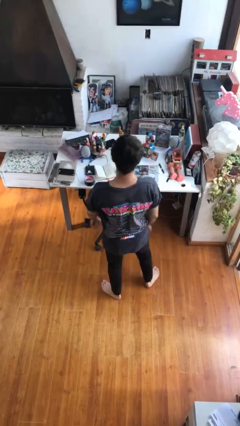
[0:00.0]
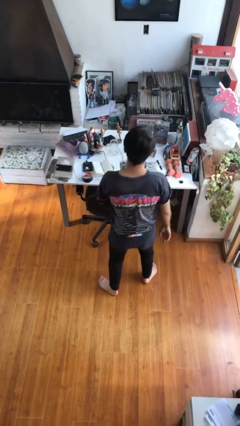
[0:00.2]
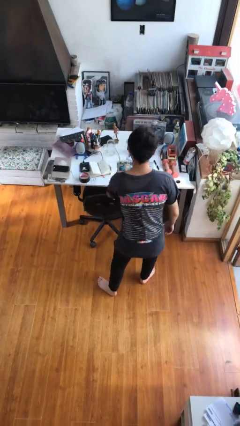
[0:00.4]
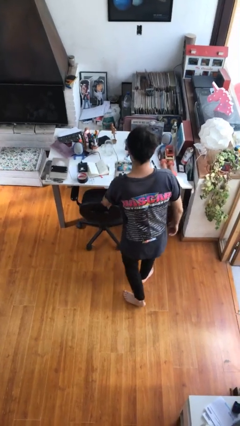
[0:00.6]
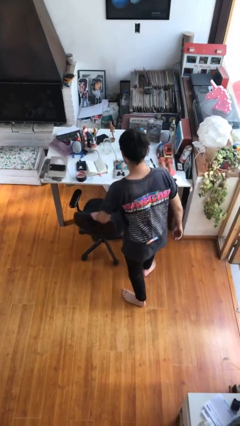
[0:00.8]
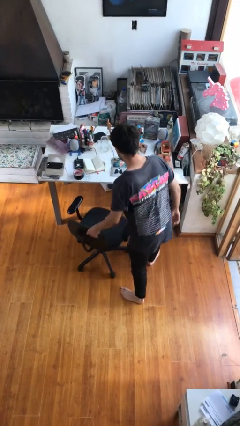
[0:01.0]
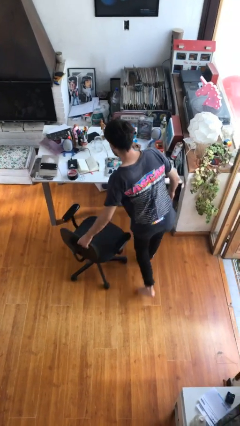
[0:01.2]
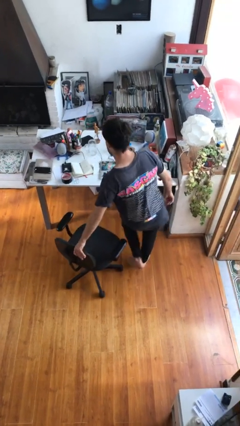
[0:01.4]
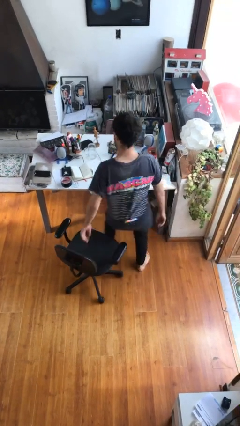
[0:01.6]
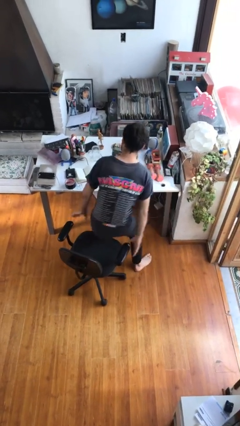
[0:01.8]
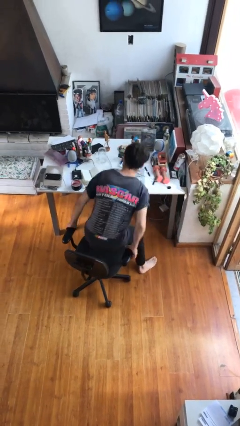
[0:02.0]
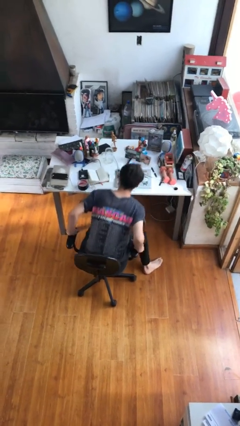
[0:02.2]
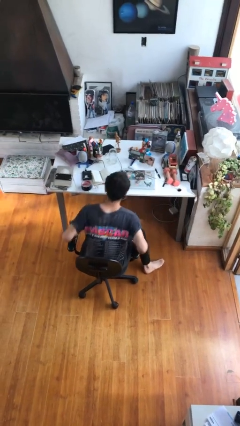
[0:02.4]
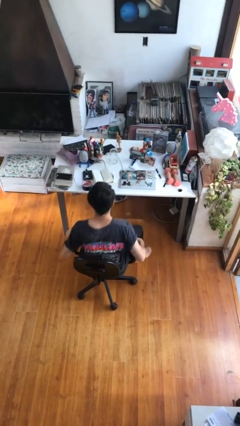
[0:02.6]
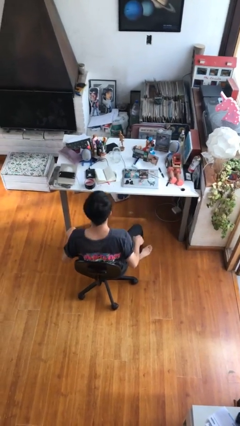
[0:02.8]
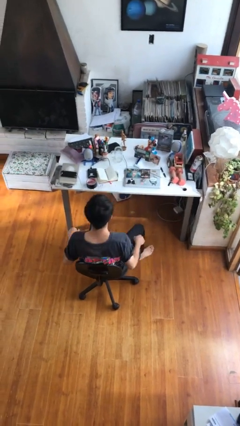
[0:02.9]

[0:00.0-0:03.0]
person sits down

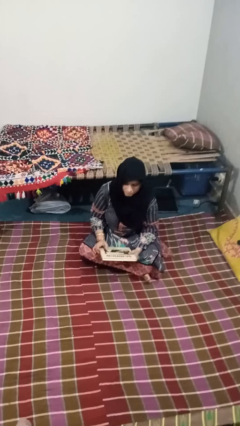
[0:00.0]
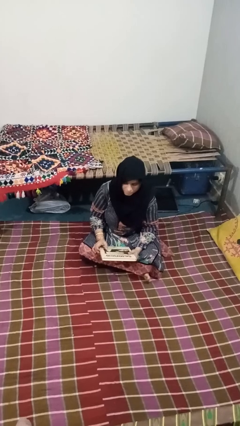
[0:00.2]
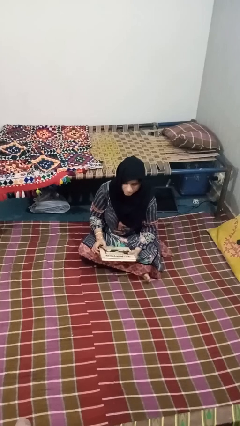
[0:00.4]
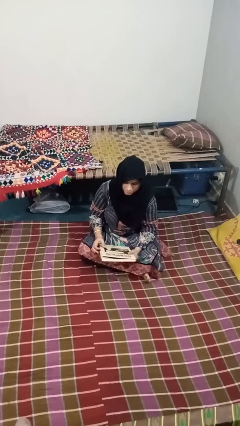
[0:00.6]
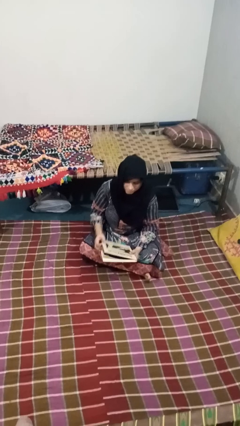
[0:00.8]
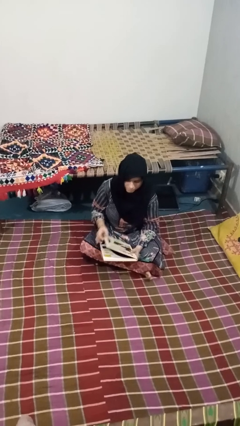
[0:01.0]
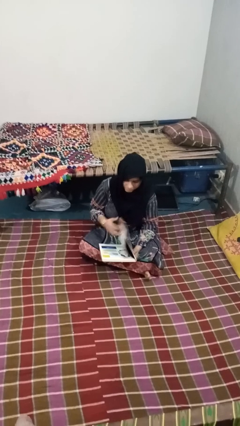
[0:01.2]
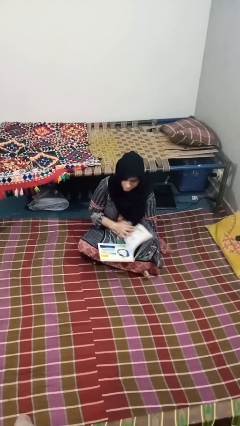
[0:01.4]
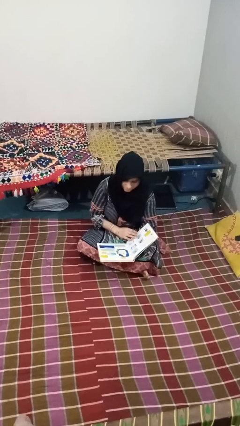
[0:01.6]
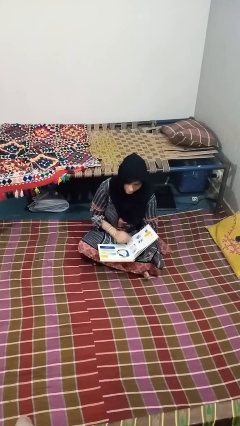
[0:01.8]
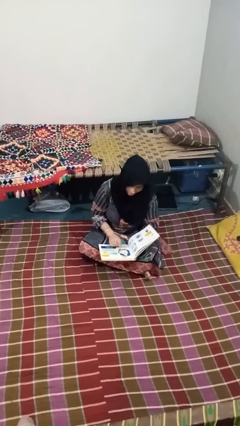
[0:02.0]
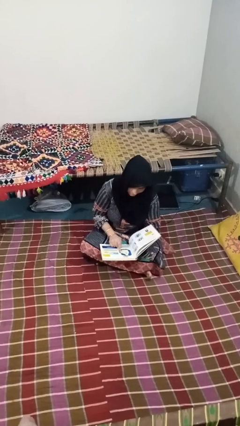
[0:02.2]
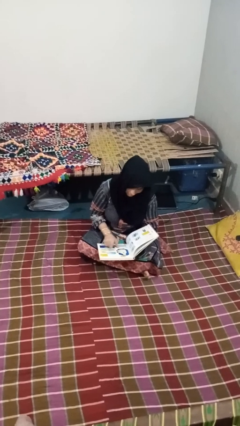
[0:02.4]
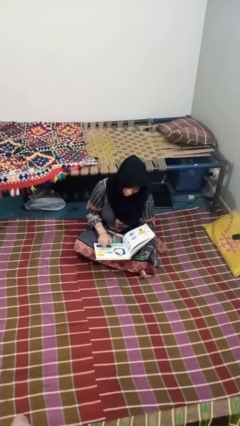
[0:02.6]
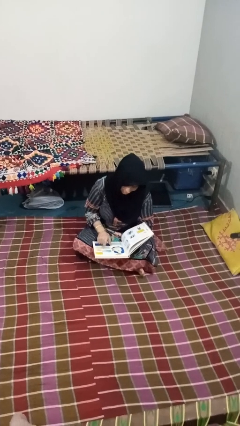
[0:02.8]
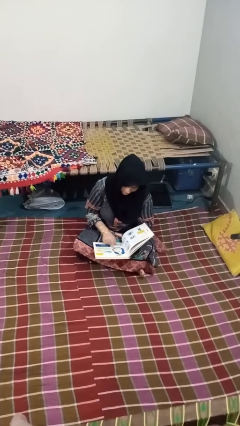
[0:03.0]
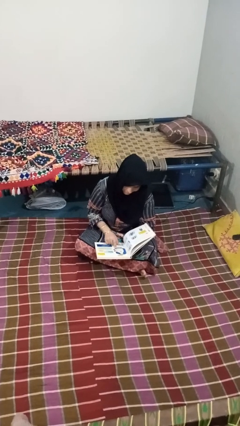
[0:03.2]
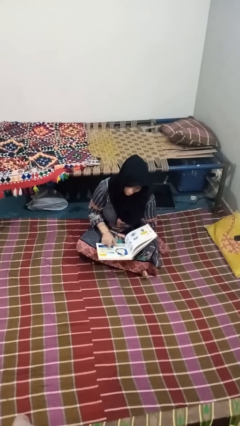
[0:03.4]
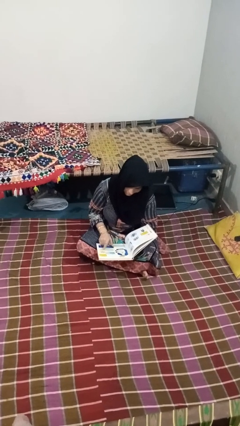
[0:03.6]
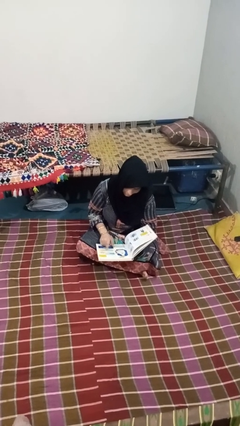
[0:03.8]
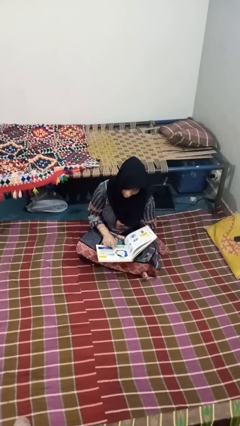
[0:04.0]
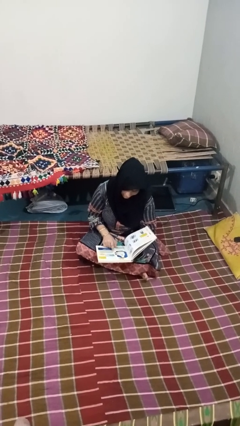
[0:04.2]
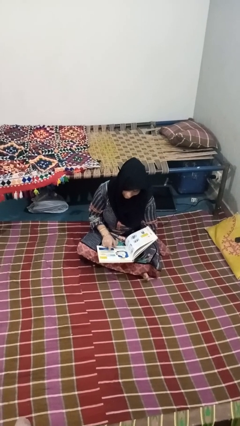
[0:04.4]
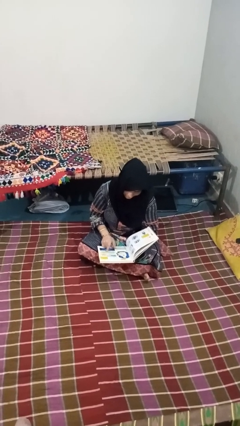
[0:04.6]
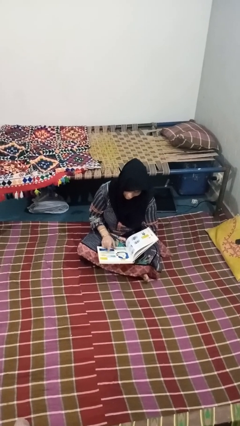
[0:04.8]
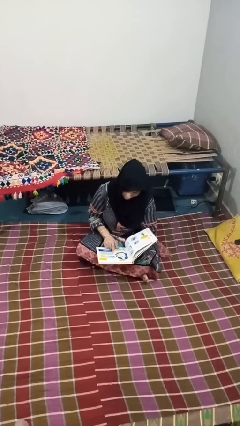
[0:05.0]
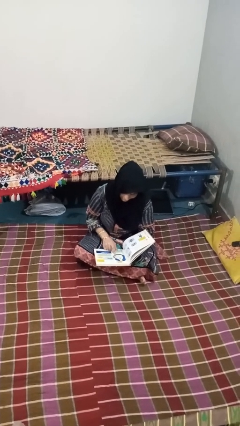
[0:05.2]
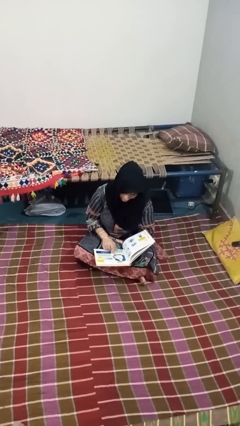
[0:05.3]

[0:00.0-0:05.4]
person reads magazine

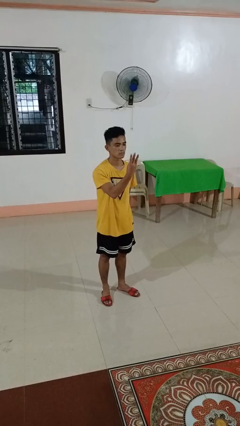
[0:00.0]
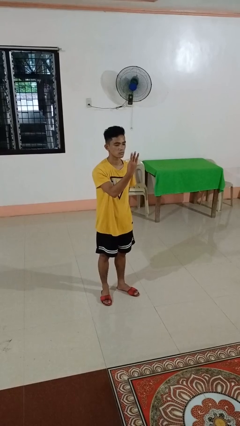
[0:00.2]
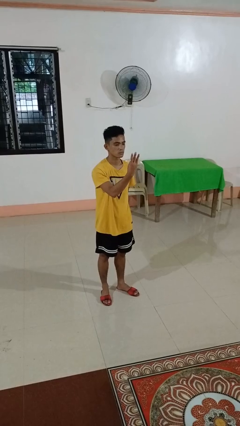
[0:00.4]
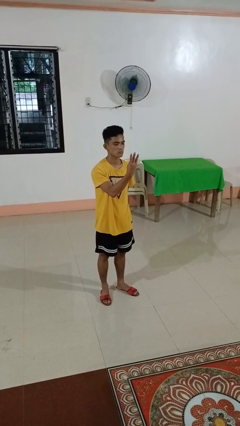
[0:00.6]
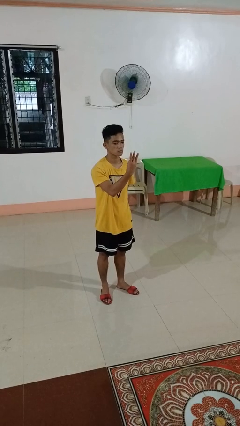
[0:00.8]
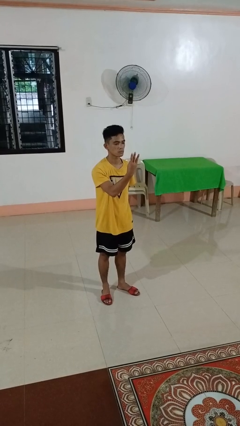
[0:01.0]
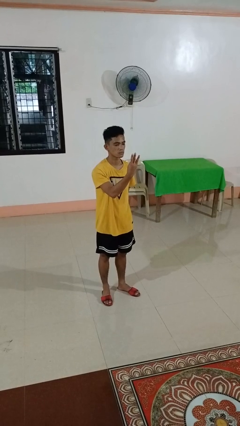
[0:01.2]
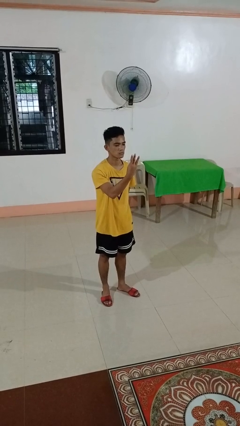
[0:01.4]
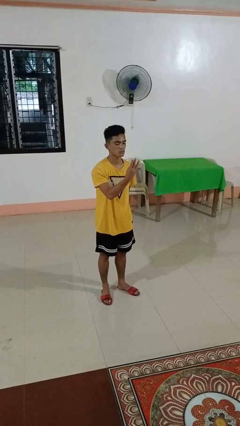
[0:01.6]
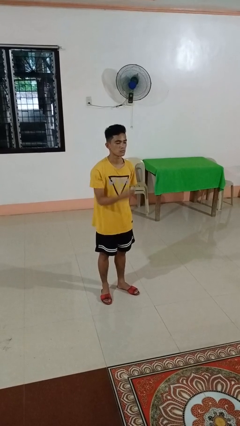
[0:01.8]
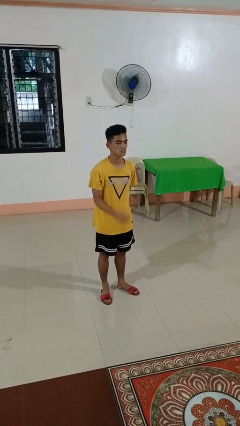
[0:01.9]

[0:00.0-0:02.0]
person gestures number three

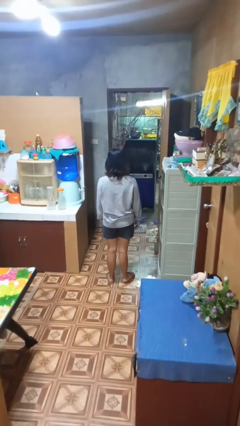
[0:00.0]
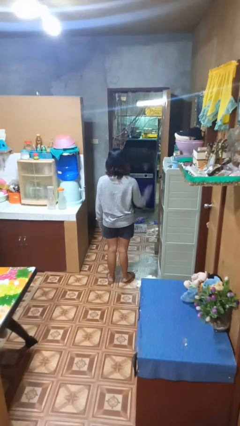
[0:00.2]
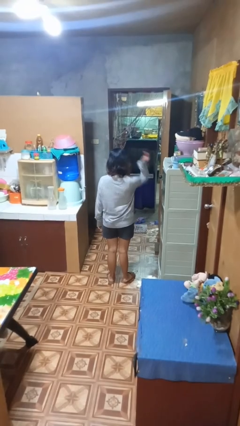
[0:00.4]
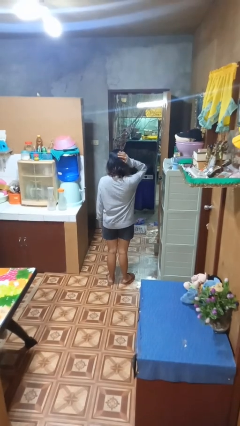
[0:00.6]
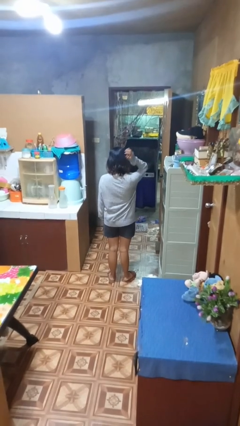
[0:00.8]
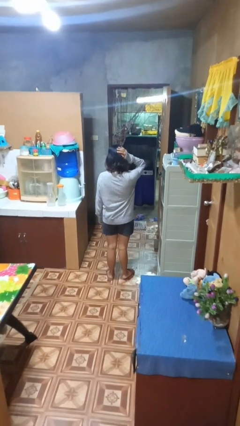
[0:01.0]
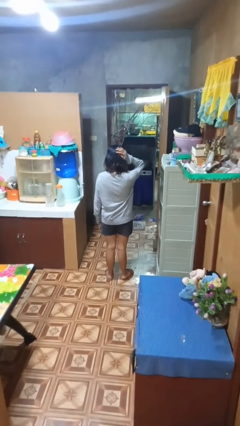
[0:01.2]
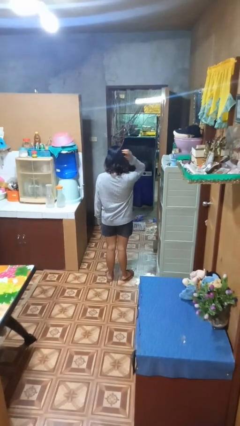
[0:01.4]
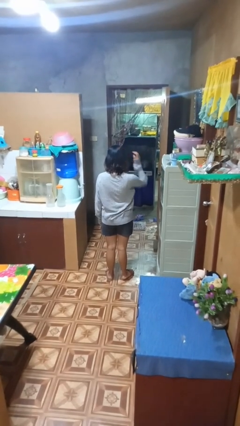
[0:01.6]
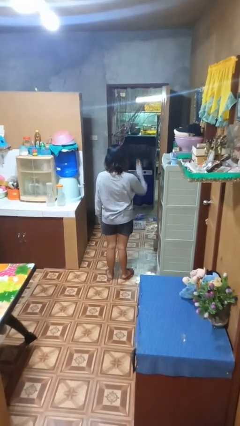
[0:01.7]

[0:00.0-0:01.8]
person pats head

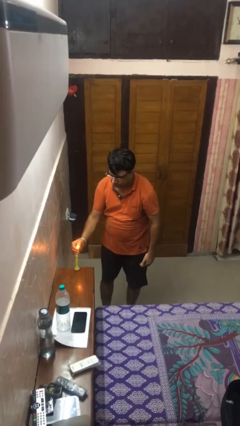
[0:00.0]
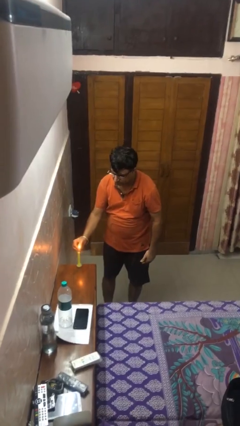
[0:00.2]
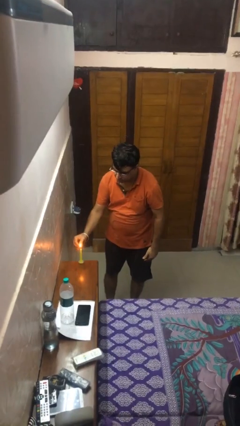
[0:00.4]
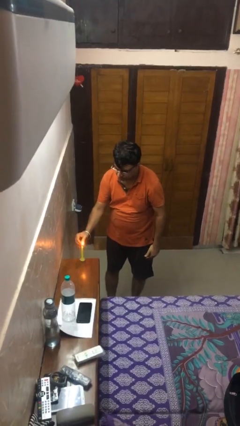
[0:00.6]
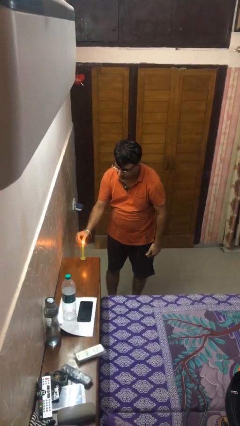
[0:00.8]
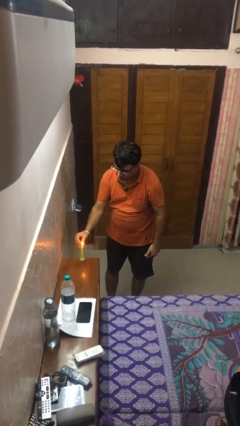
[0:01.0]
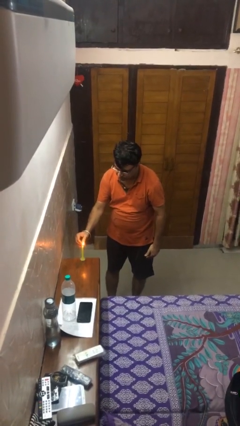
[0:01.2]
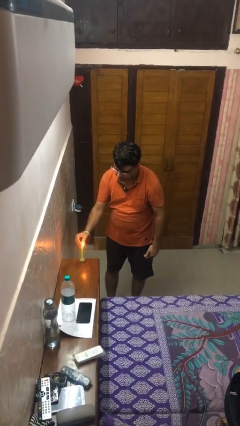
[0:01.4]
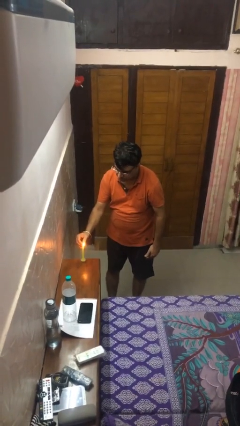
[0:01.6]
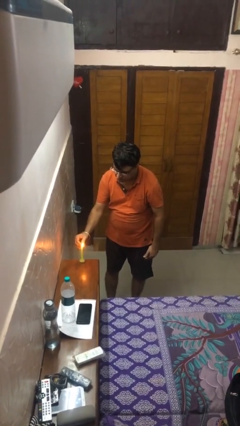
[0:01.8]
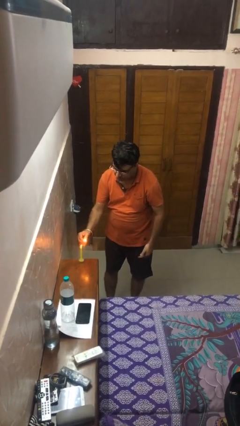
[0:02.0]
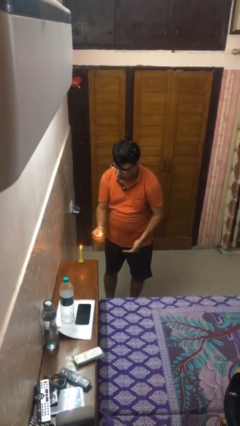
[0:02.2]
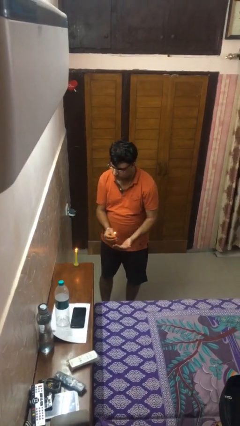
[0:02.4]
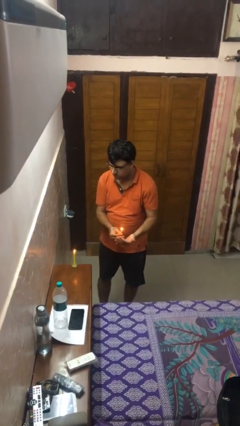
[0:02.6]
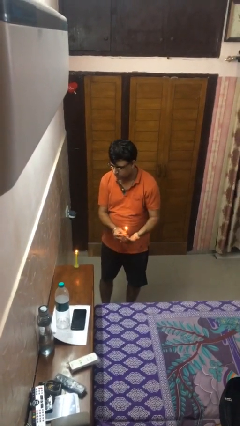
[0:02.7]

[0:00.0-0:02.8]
person lights candle

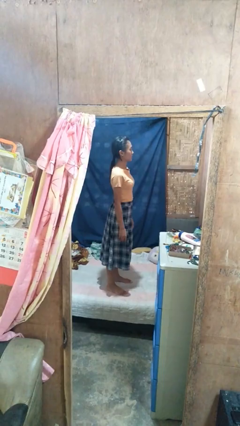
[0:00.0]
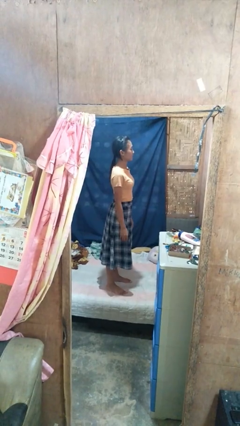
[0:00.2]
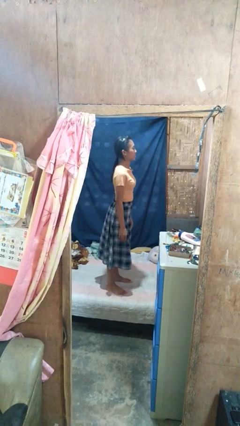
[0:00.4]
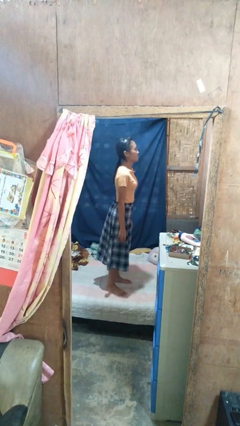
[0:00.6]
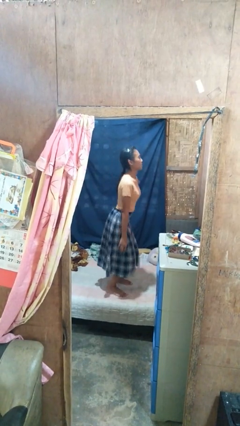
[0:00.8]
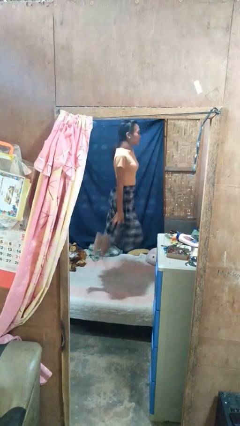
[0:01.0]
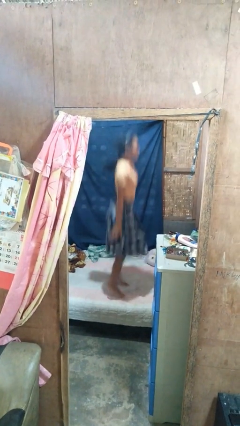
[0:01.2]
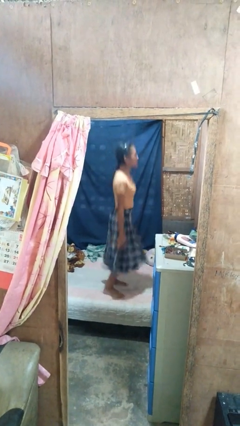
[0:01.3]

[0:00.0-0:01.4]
person jumps on bed

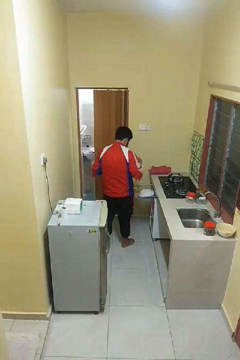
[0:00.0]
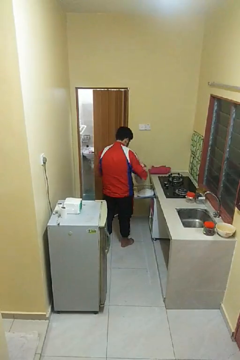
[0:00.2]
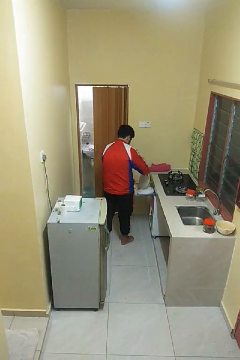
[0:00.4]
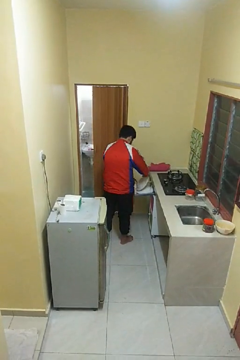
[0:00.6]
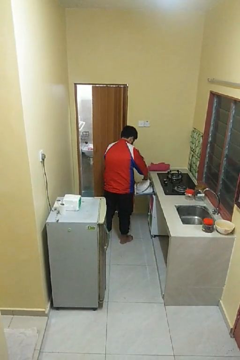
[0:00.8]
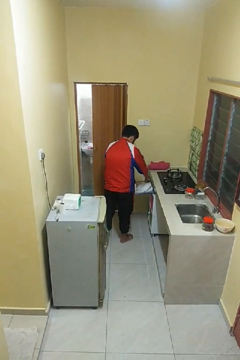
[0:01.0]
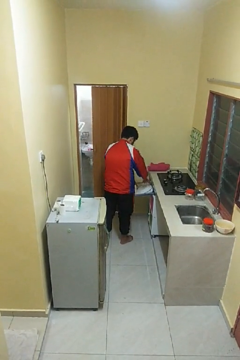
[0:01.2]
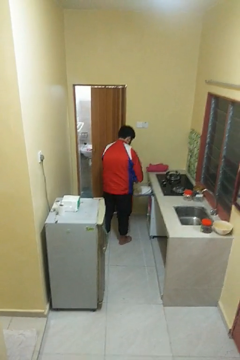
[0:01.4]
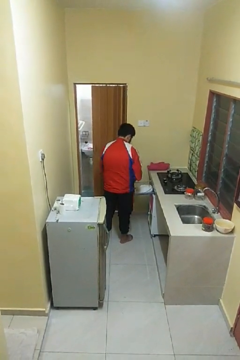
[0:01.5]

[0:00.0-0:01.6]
person puts object into kitchen drawer
